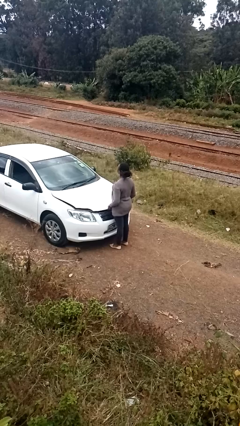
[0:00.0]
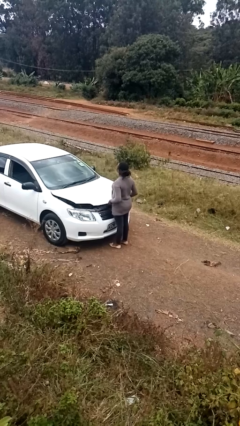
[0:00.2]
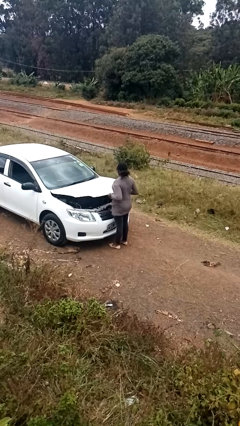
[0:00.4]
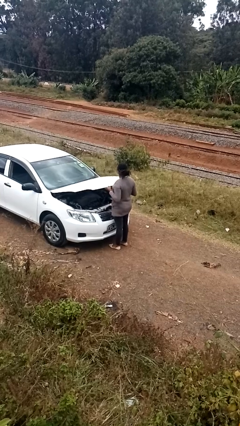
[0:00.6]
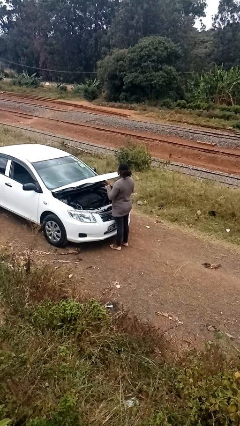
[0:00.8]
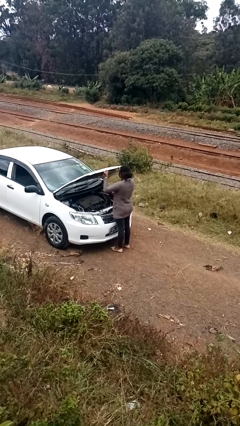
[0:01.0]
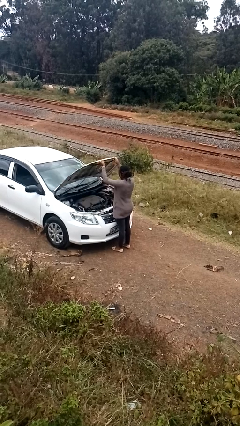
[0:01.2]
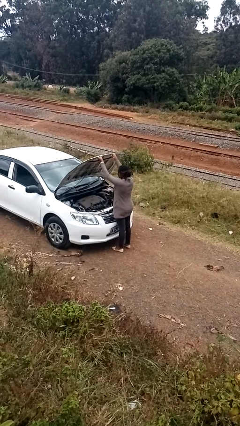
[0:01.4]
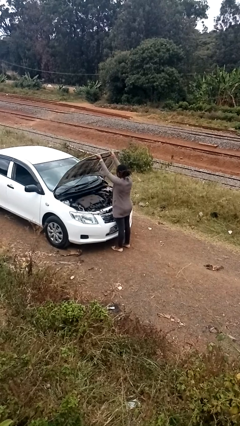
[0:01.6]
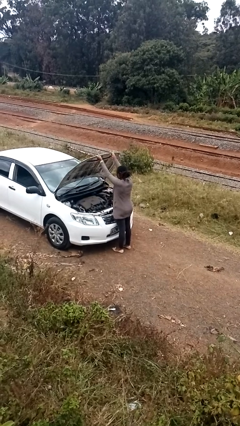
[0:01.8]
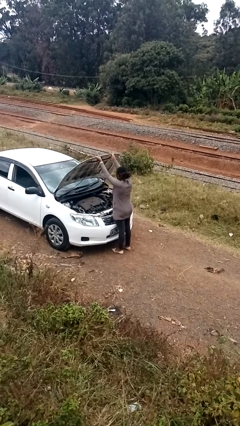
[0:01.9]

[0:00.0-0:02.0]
person opens car hood

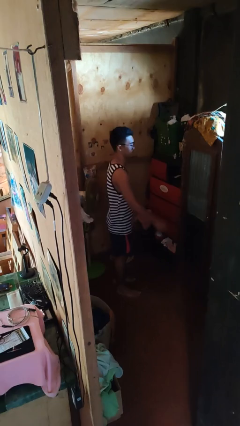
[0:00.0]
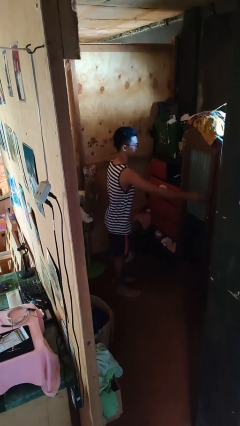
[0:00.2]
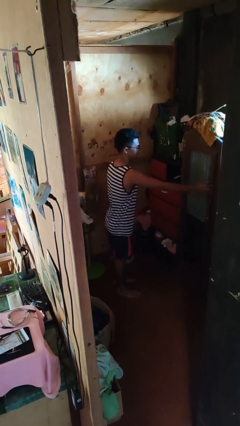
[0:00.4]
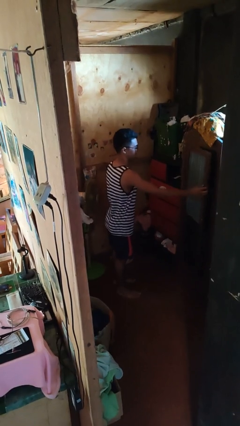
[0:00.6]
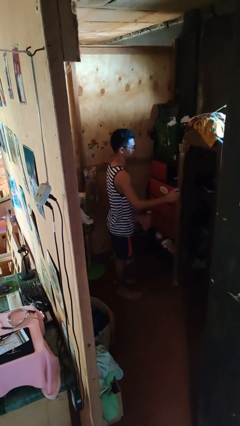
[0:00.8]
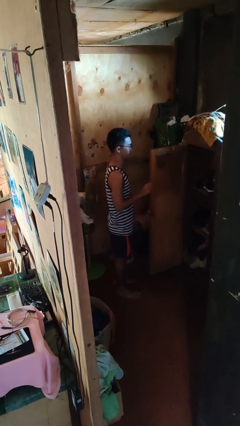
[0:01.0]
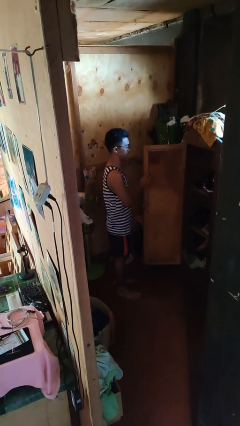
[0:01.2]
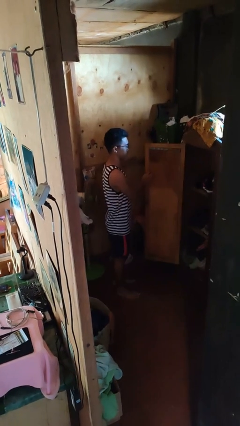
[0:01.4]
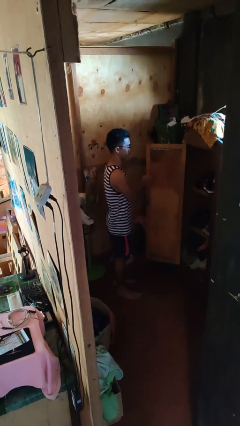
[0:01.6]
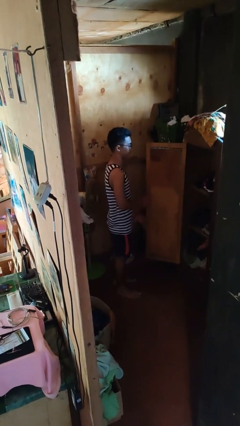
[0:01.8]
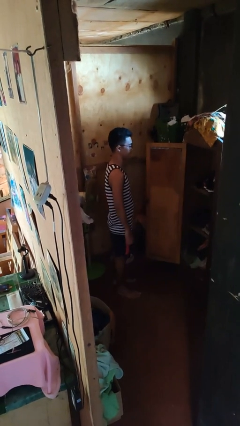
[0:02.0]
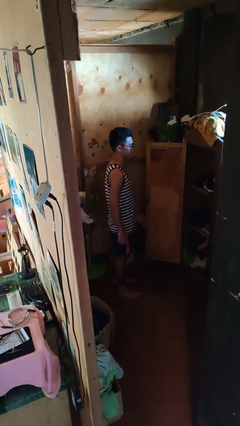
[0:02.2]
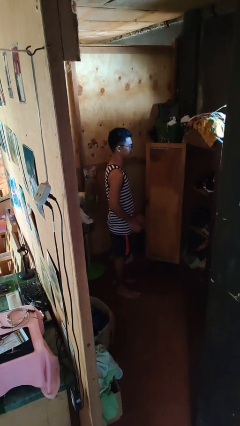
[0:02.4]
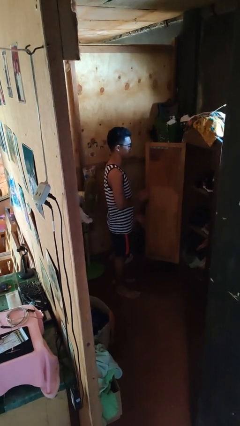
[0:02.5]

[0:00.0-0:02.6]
person opens closet door

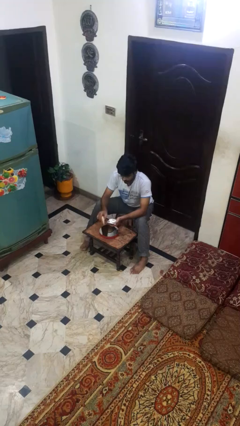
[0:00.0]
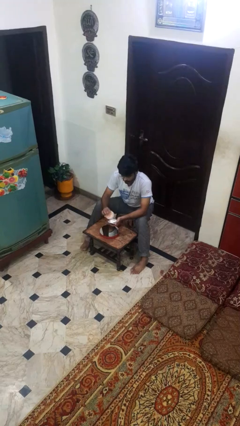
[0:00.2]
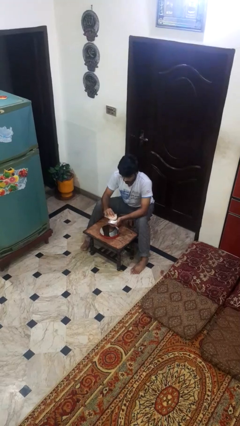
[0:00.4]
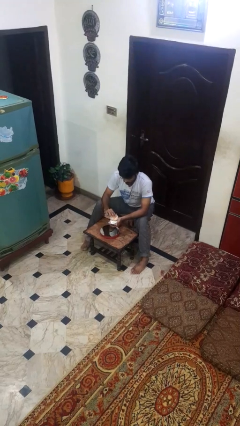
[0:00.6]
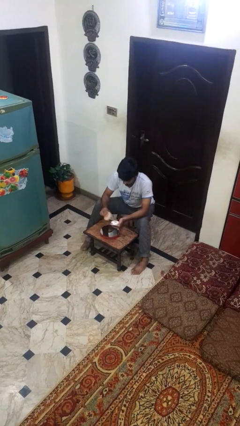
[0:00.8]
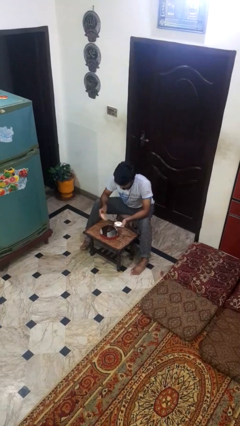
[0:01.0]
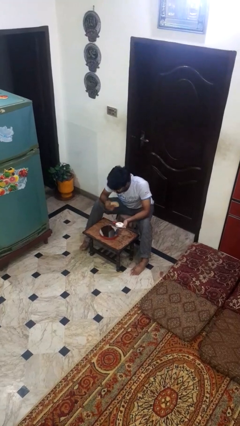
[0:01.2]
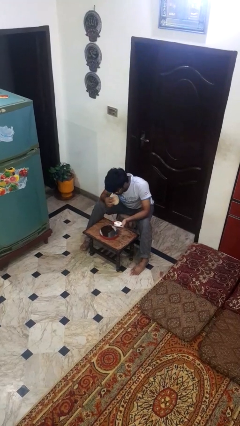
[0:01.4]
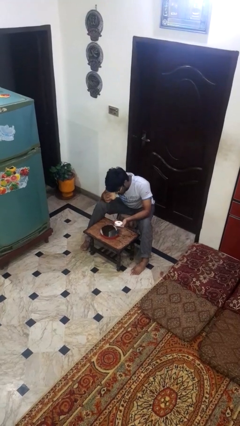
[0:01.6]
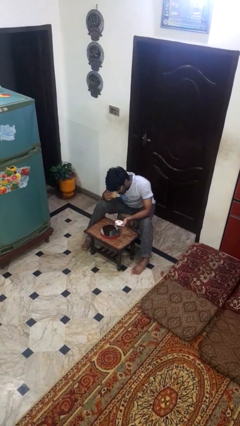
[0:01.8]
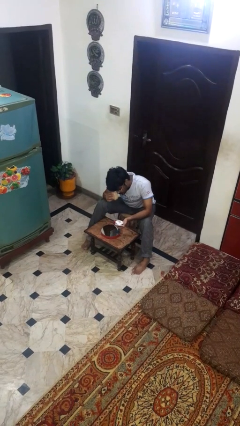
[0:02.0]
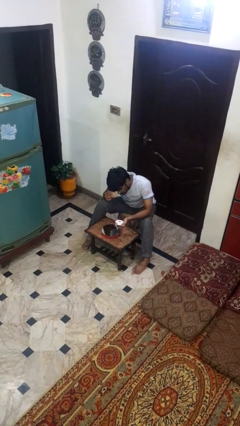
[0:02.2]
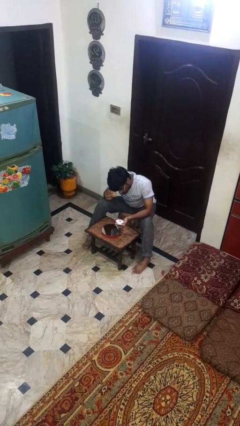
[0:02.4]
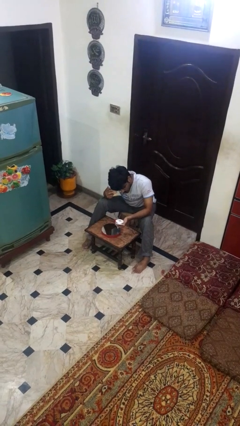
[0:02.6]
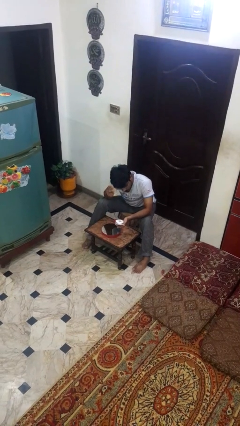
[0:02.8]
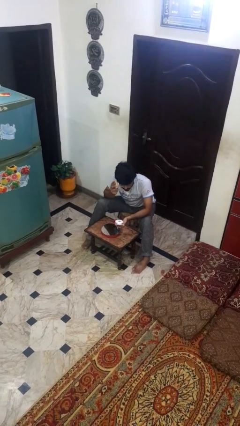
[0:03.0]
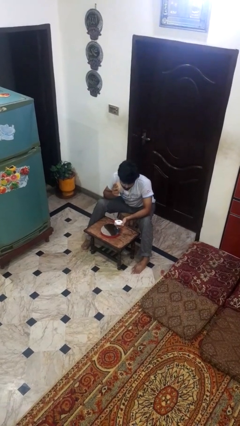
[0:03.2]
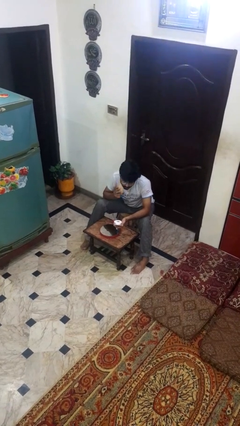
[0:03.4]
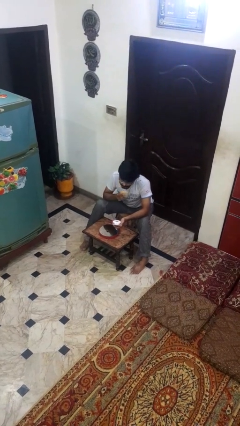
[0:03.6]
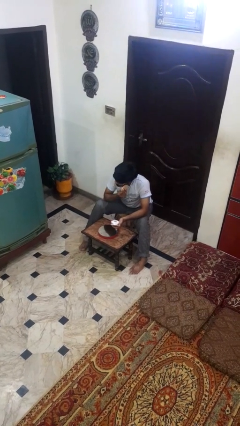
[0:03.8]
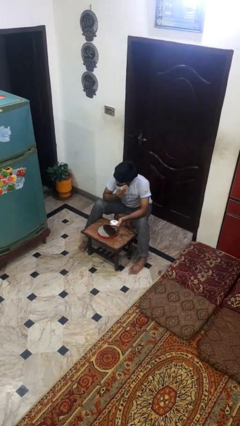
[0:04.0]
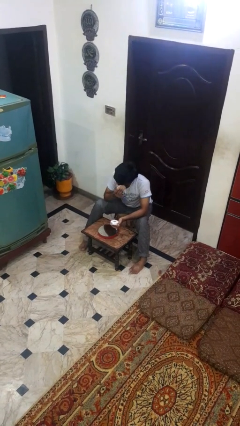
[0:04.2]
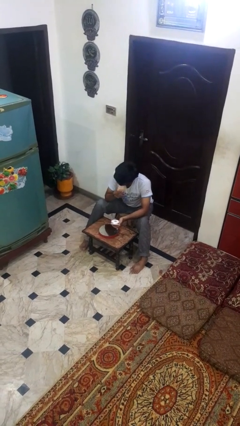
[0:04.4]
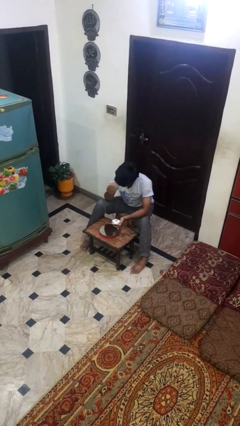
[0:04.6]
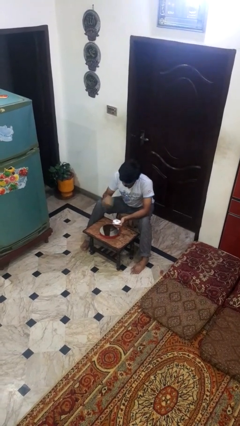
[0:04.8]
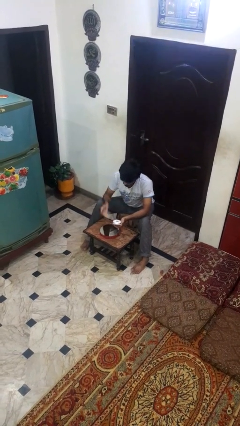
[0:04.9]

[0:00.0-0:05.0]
person applies foundation makeup

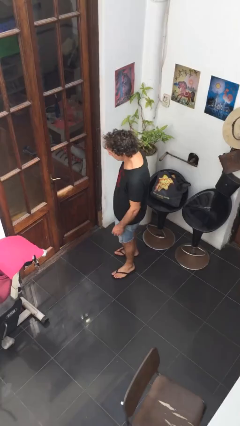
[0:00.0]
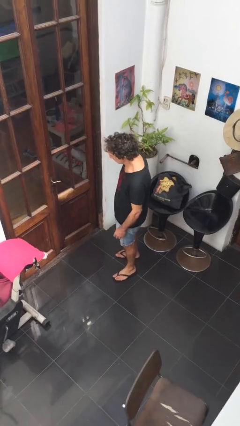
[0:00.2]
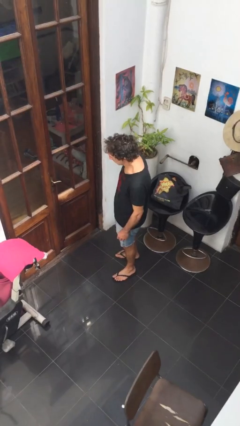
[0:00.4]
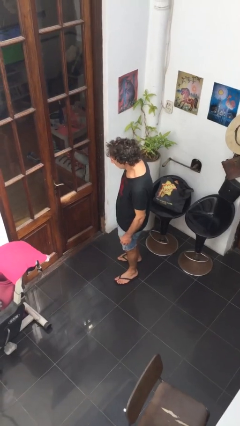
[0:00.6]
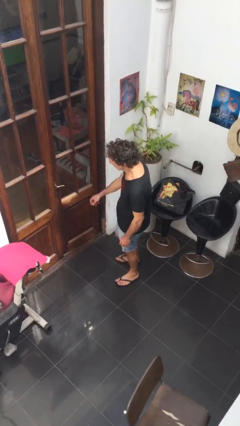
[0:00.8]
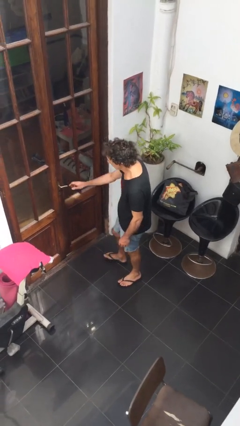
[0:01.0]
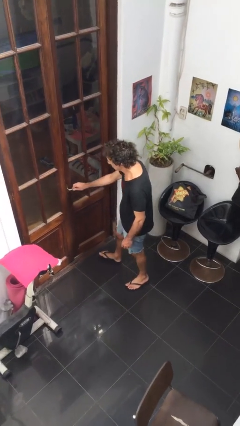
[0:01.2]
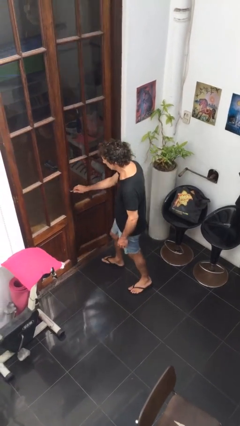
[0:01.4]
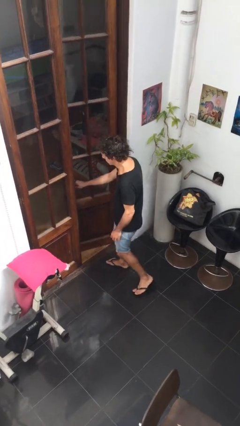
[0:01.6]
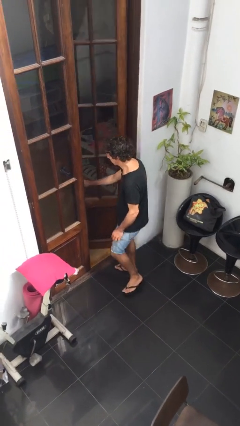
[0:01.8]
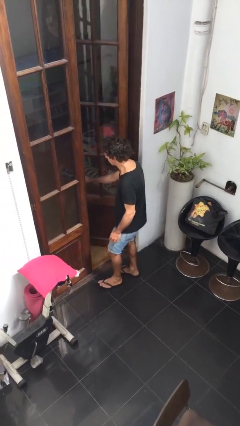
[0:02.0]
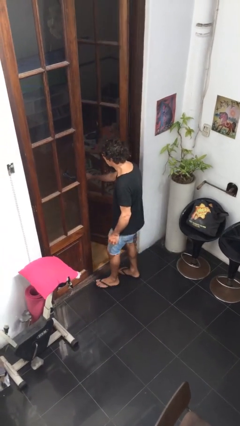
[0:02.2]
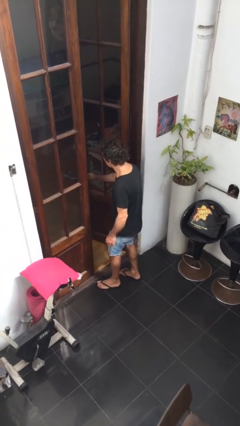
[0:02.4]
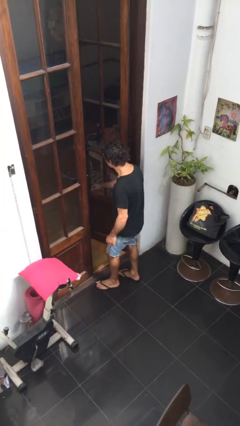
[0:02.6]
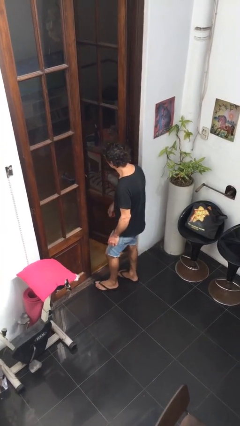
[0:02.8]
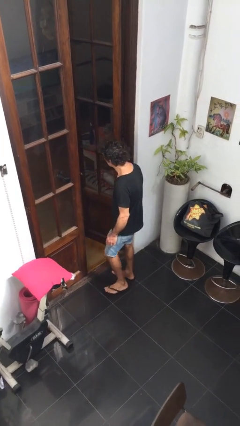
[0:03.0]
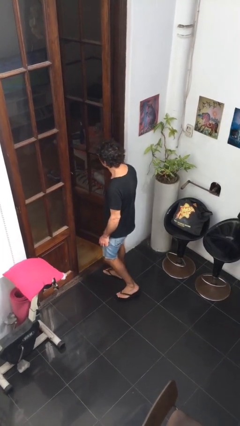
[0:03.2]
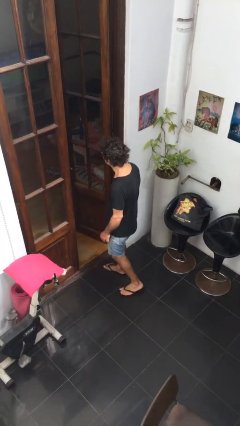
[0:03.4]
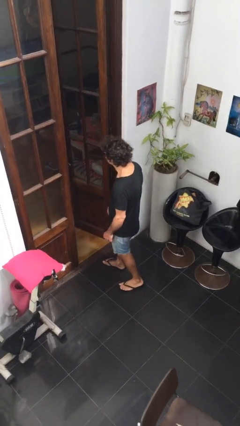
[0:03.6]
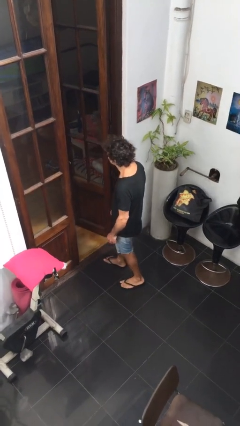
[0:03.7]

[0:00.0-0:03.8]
person opens facility door

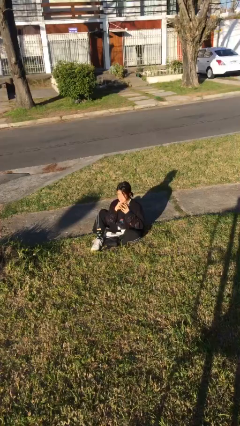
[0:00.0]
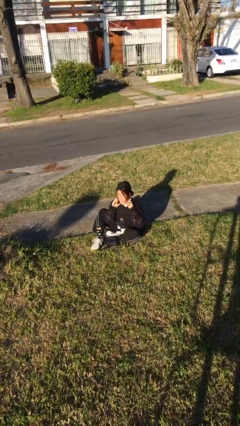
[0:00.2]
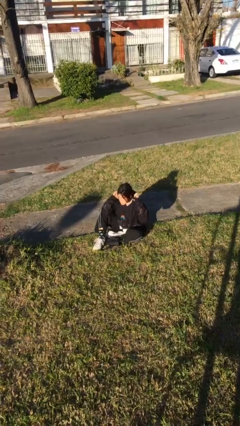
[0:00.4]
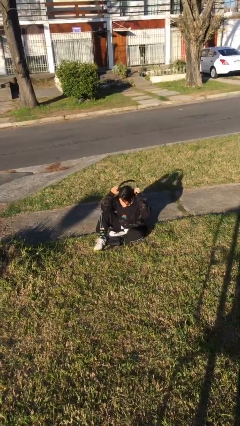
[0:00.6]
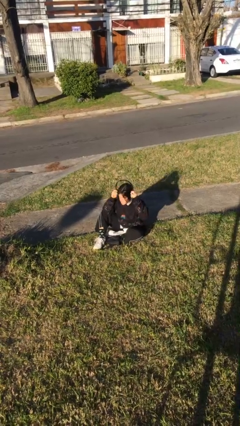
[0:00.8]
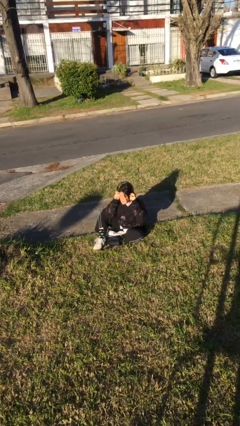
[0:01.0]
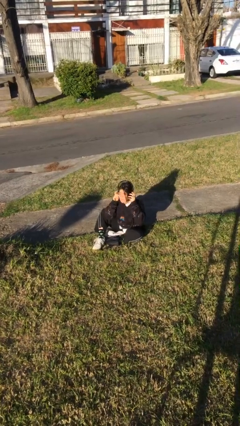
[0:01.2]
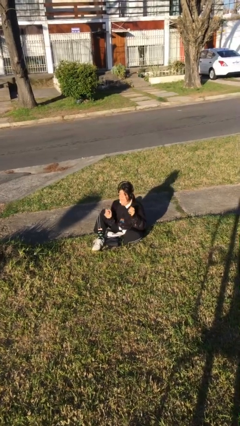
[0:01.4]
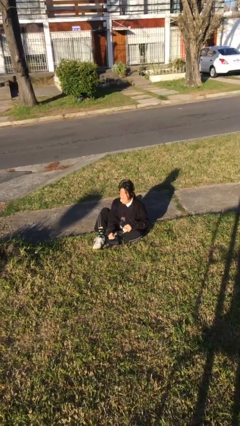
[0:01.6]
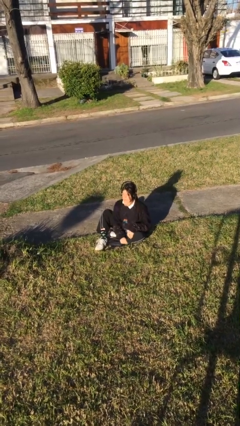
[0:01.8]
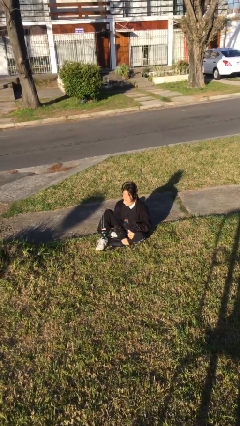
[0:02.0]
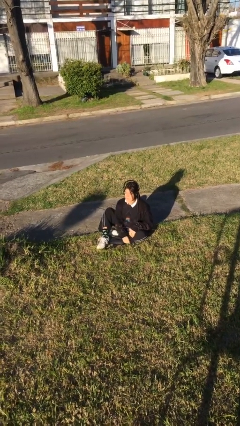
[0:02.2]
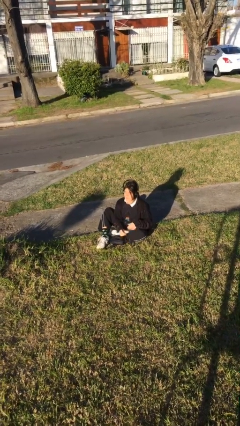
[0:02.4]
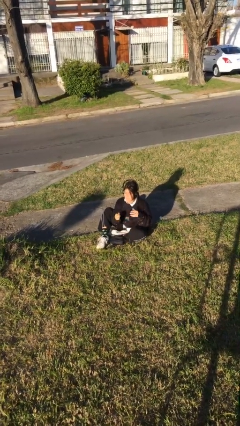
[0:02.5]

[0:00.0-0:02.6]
person puts on headphones

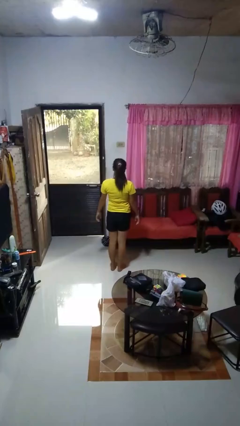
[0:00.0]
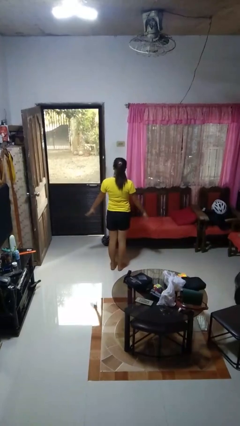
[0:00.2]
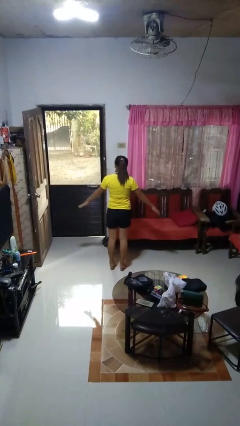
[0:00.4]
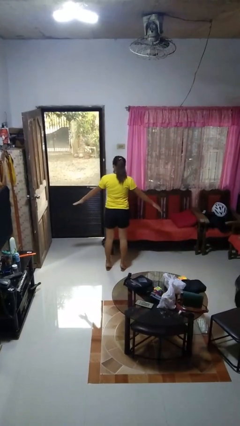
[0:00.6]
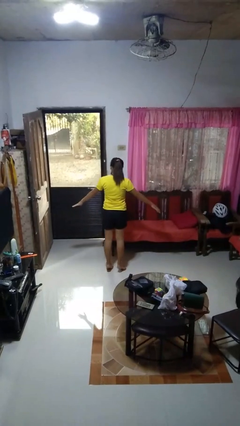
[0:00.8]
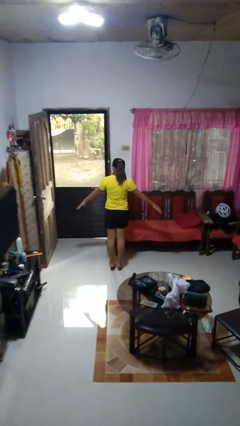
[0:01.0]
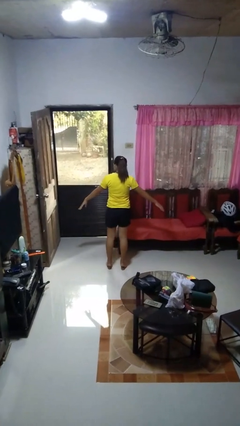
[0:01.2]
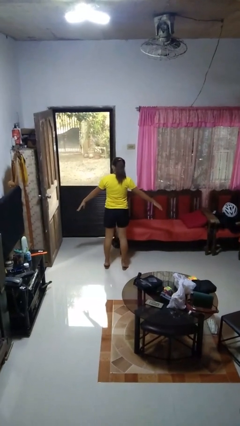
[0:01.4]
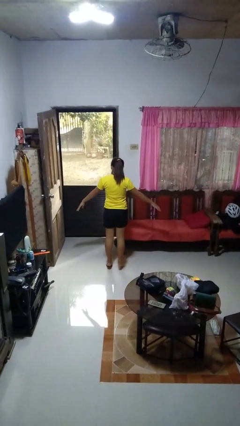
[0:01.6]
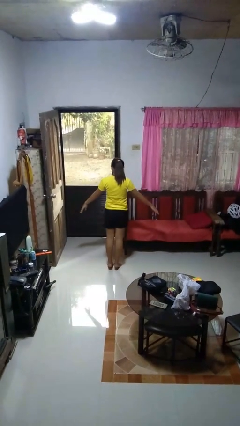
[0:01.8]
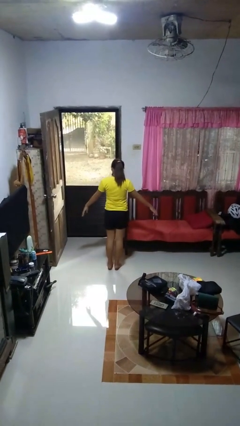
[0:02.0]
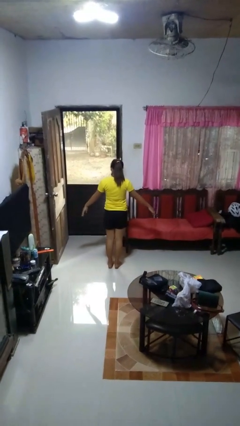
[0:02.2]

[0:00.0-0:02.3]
person walks tiptoe
